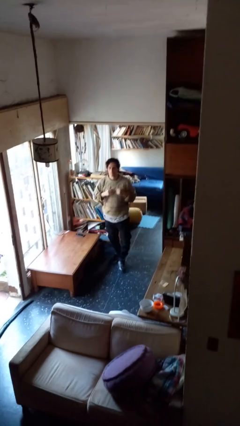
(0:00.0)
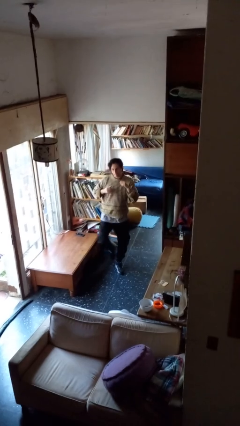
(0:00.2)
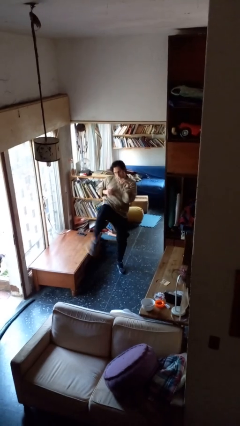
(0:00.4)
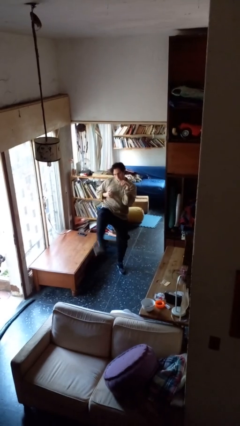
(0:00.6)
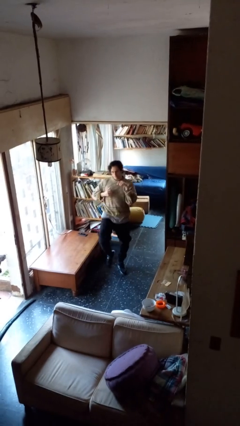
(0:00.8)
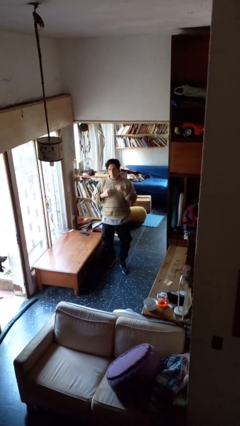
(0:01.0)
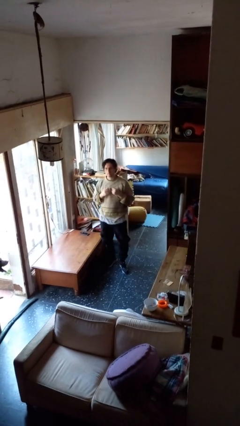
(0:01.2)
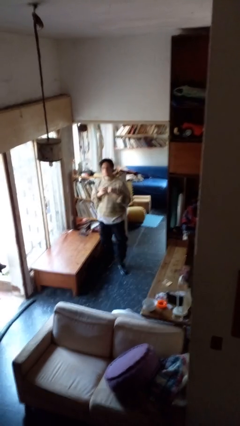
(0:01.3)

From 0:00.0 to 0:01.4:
person karate kicks

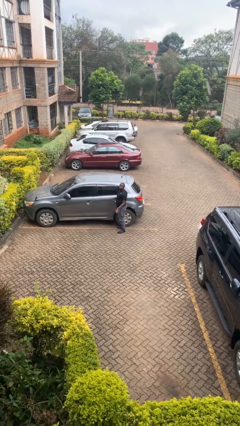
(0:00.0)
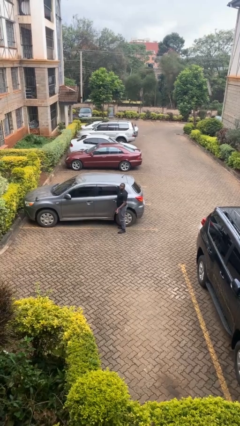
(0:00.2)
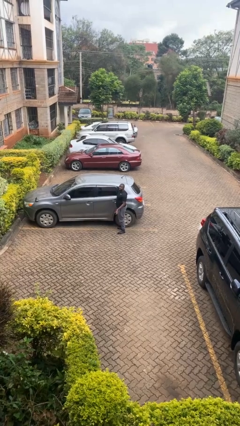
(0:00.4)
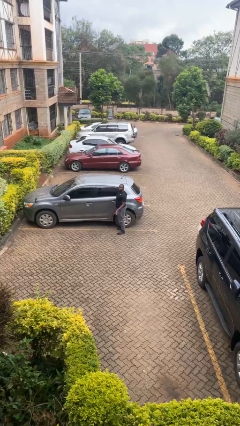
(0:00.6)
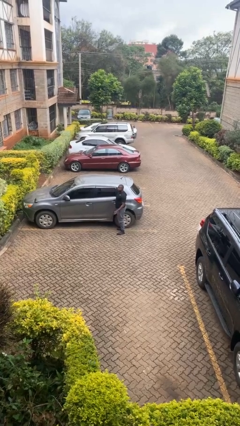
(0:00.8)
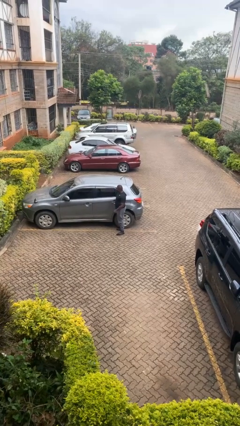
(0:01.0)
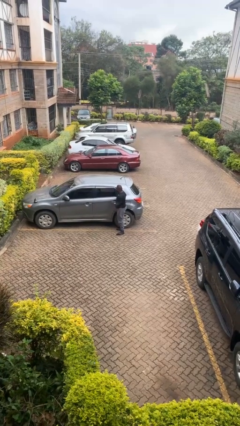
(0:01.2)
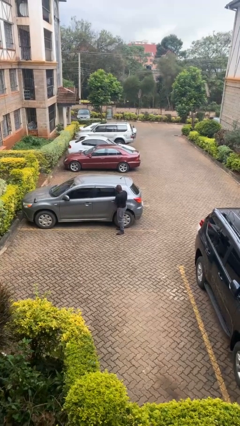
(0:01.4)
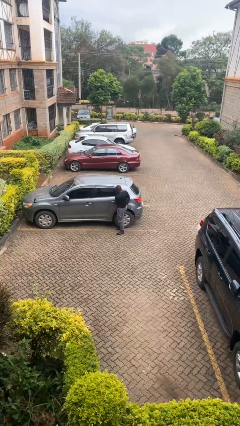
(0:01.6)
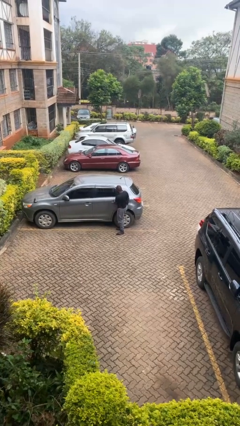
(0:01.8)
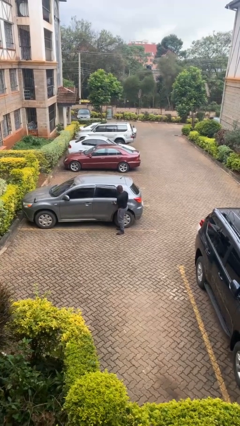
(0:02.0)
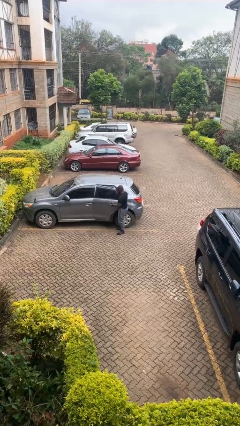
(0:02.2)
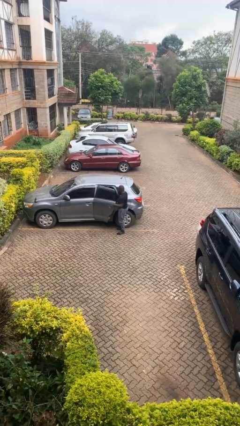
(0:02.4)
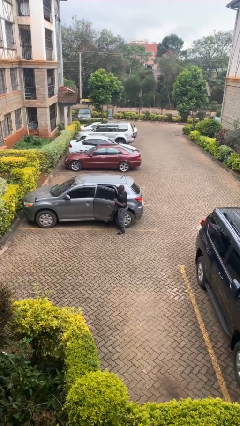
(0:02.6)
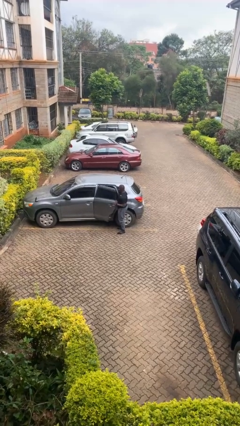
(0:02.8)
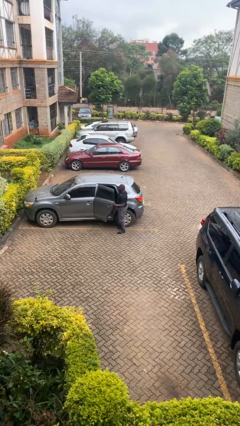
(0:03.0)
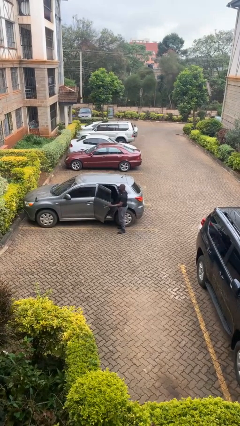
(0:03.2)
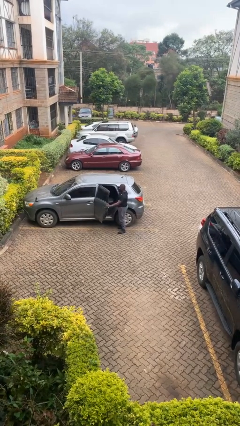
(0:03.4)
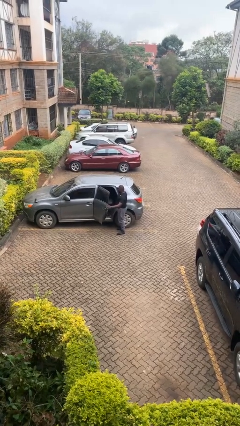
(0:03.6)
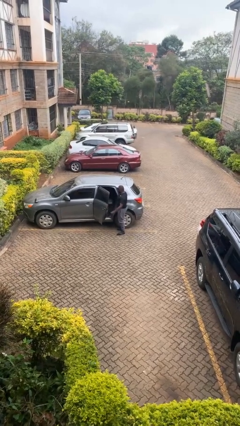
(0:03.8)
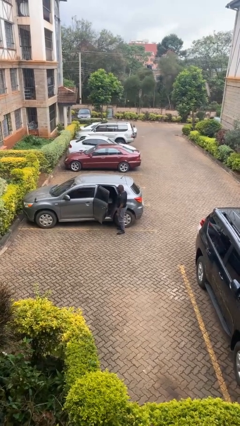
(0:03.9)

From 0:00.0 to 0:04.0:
person opens car door

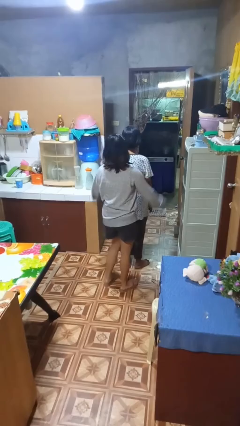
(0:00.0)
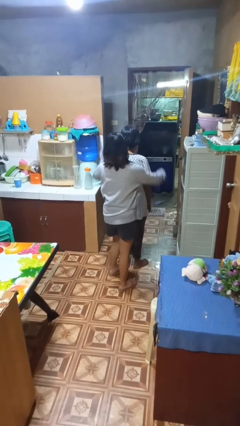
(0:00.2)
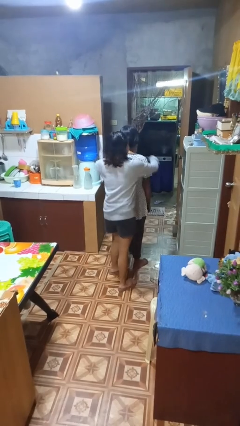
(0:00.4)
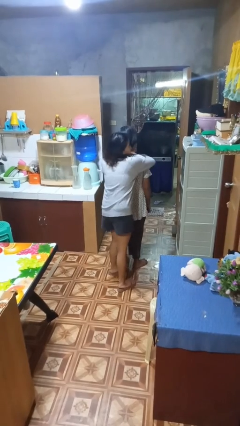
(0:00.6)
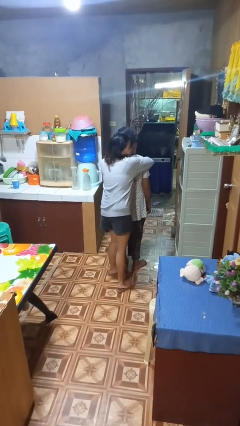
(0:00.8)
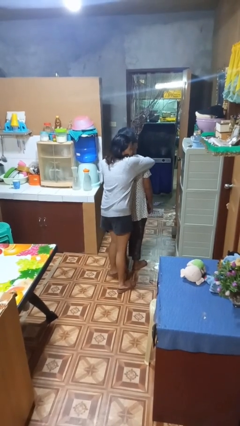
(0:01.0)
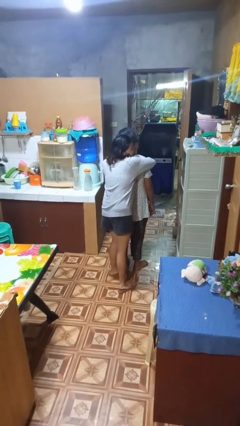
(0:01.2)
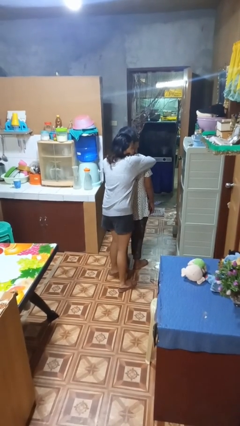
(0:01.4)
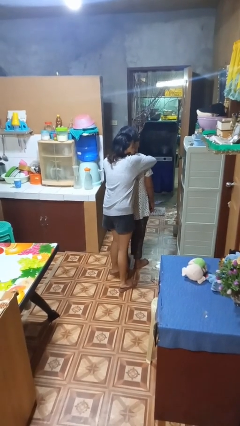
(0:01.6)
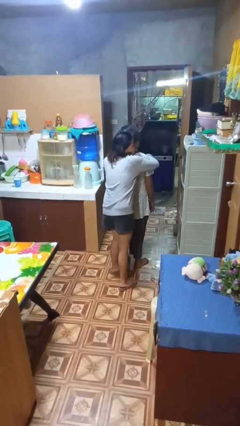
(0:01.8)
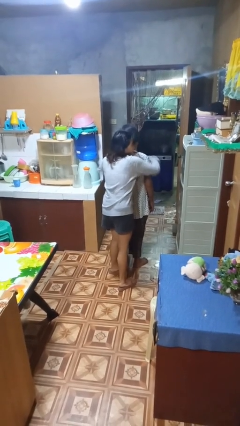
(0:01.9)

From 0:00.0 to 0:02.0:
person hugs person from behind

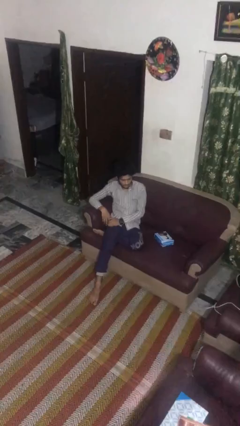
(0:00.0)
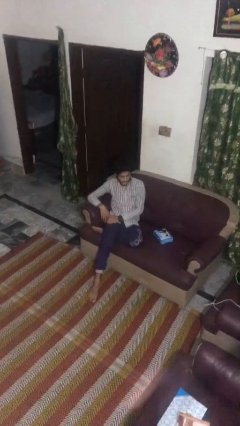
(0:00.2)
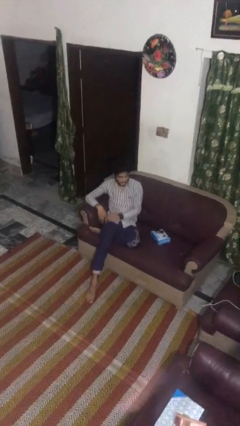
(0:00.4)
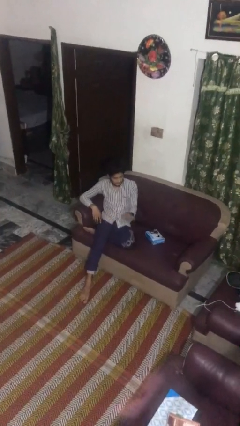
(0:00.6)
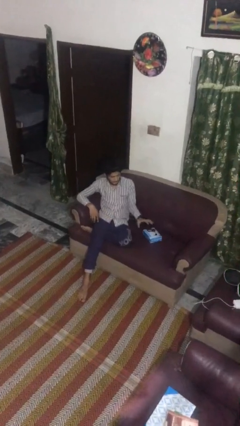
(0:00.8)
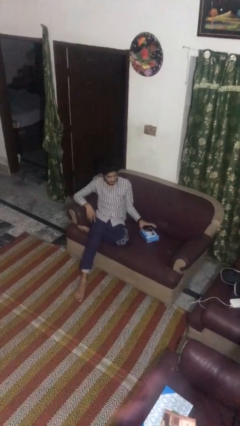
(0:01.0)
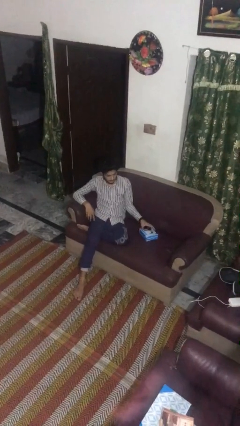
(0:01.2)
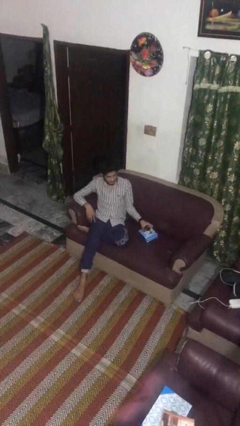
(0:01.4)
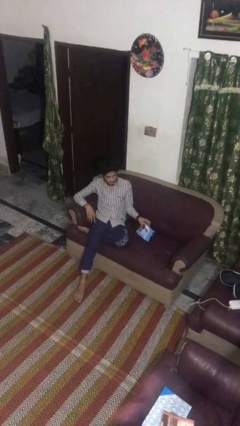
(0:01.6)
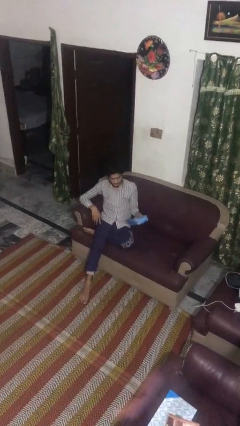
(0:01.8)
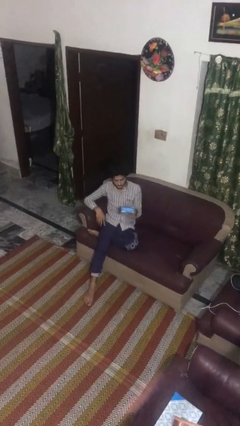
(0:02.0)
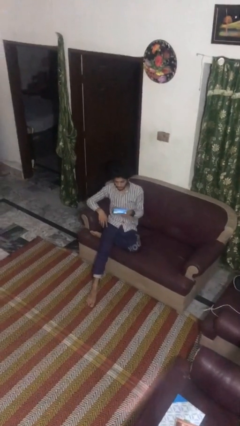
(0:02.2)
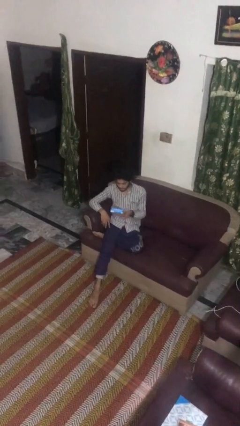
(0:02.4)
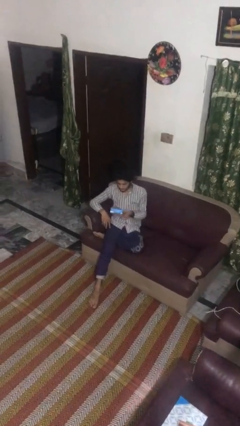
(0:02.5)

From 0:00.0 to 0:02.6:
person picks up object from couch

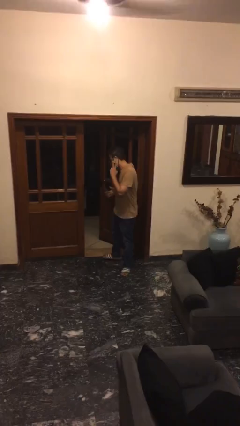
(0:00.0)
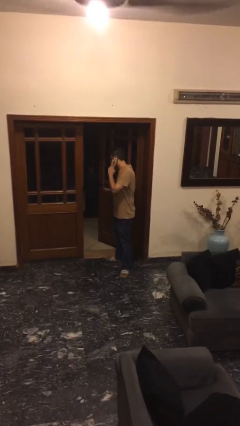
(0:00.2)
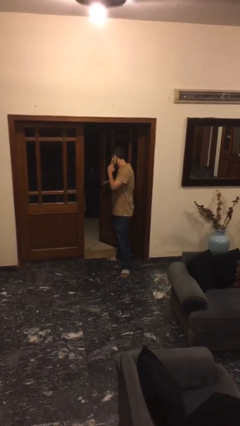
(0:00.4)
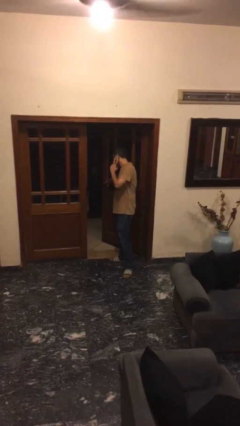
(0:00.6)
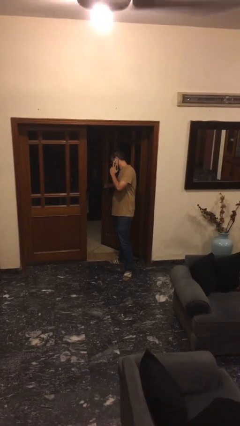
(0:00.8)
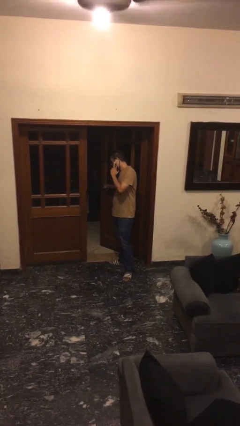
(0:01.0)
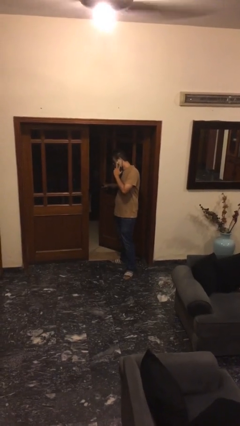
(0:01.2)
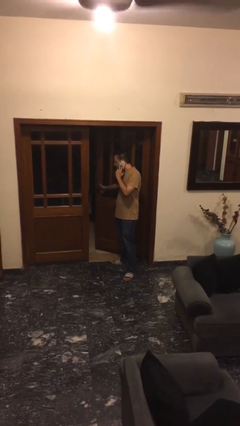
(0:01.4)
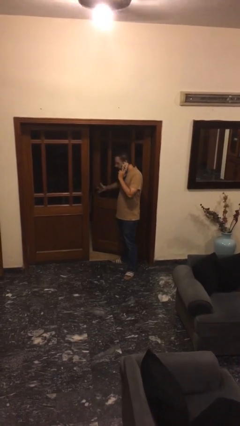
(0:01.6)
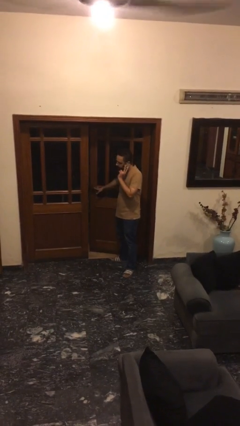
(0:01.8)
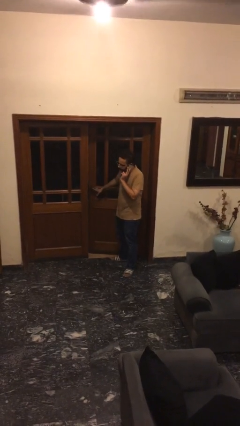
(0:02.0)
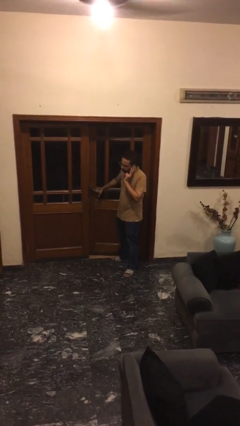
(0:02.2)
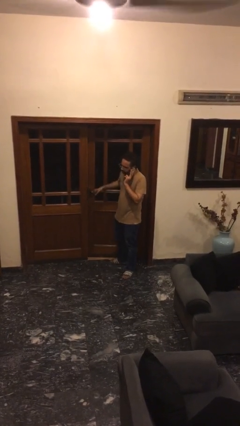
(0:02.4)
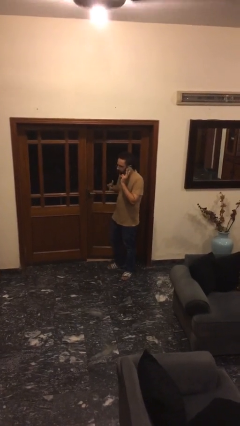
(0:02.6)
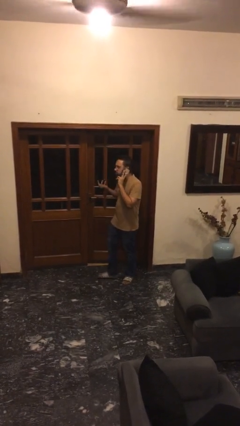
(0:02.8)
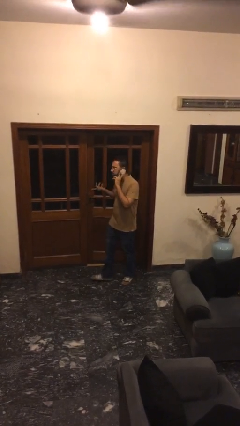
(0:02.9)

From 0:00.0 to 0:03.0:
person closes facility door

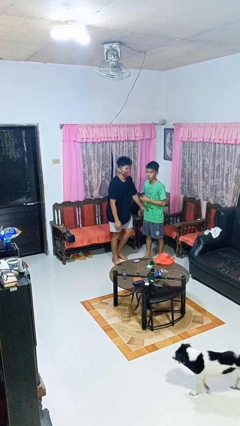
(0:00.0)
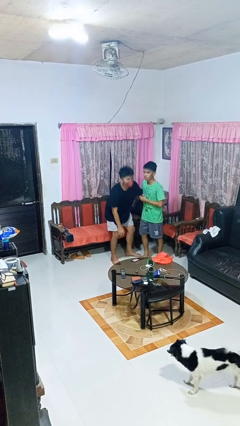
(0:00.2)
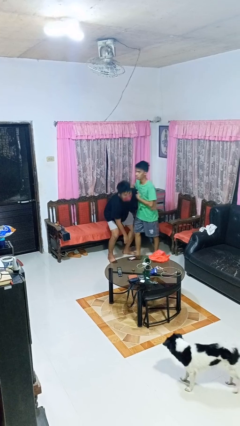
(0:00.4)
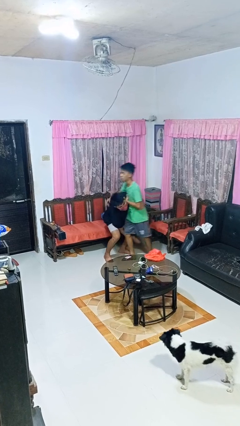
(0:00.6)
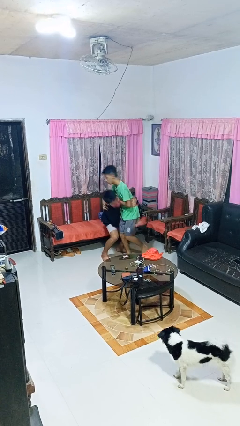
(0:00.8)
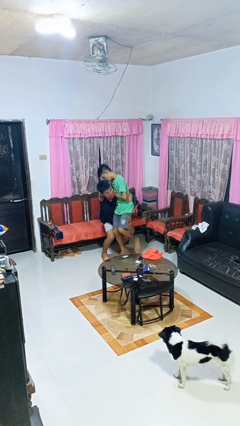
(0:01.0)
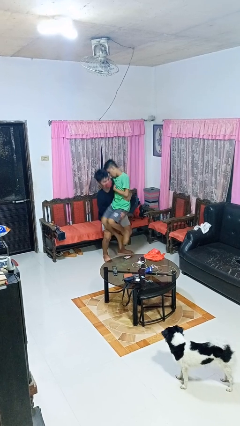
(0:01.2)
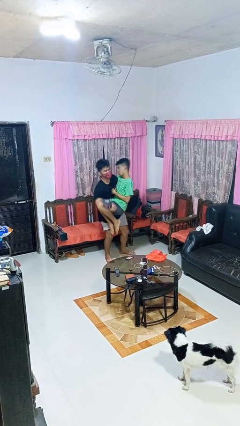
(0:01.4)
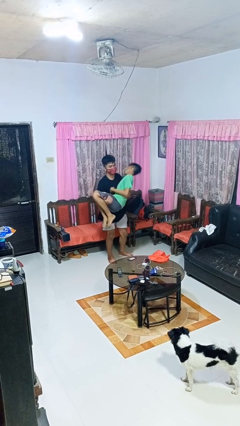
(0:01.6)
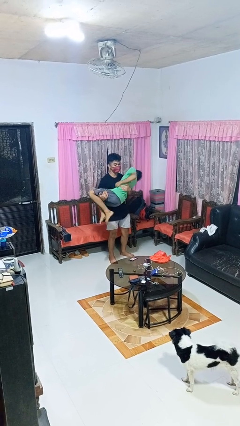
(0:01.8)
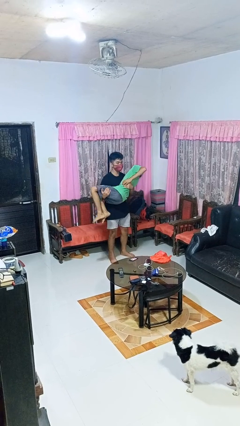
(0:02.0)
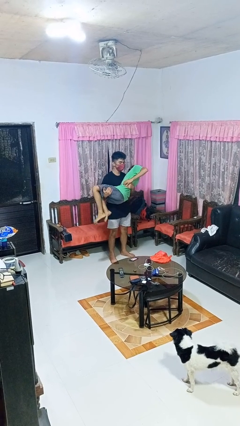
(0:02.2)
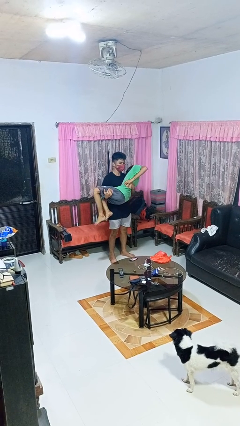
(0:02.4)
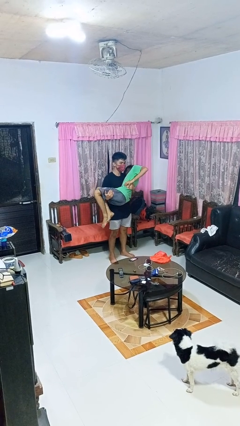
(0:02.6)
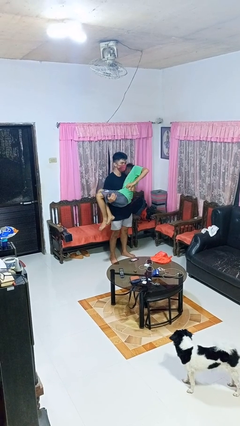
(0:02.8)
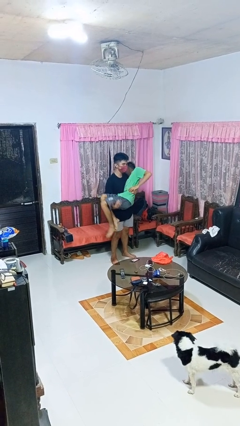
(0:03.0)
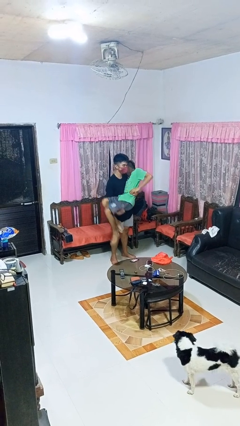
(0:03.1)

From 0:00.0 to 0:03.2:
person picks up person

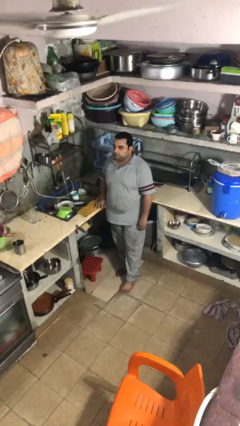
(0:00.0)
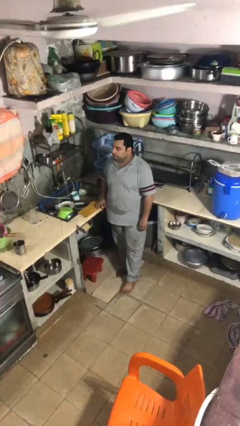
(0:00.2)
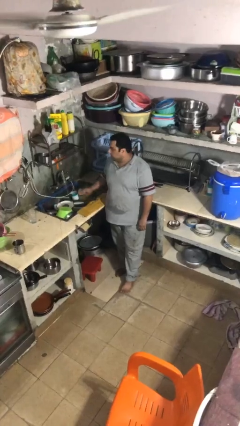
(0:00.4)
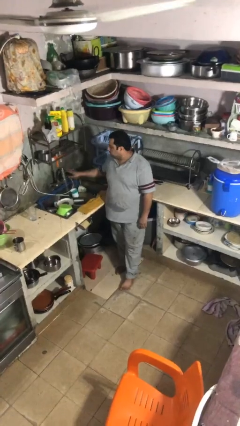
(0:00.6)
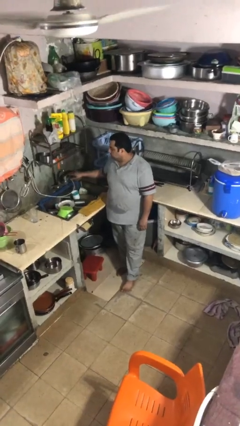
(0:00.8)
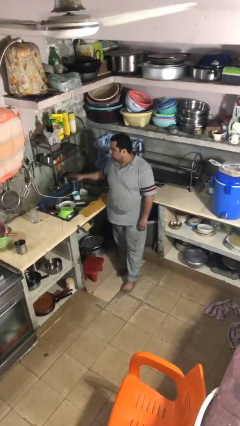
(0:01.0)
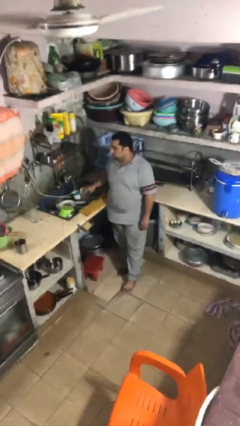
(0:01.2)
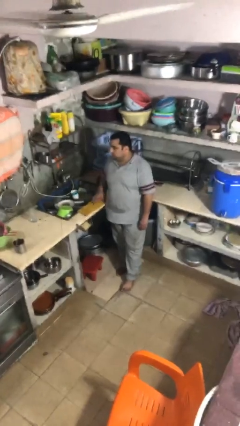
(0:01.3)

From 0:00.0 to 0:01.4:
person turns off faucet
